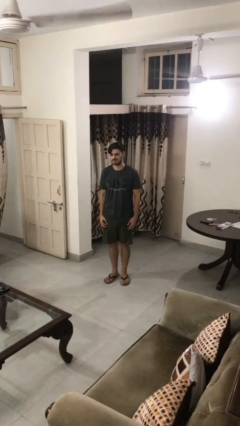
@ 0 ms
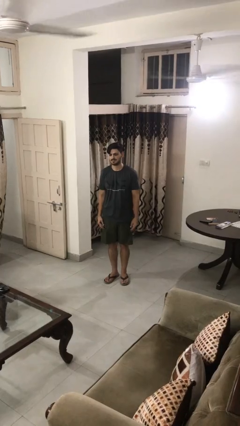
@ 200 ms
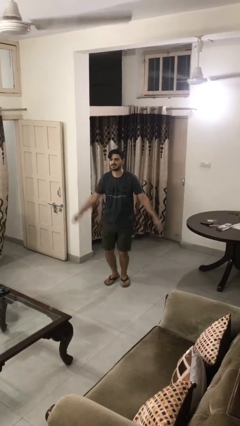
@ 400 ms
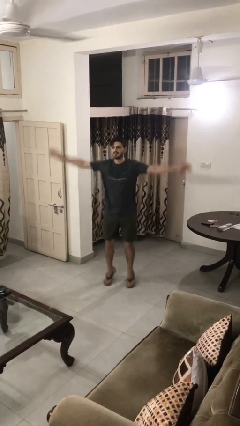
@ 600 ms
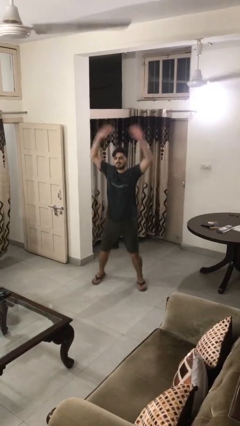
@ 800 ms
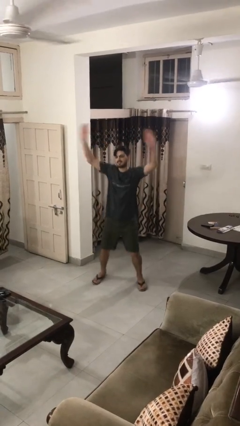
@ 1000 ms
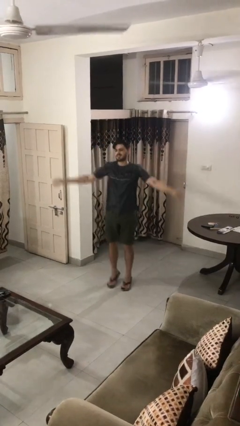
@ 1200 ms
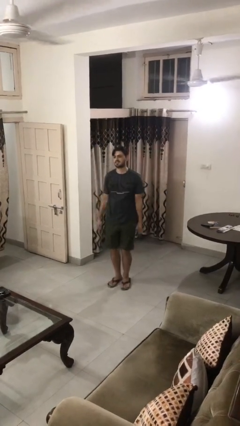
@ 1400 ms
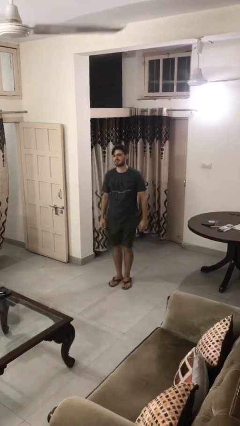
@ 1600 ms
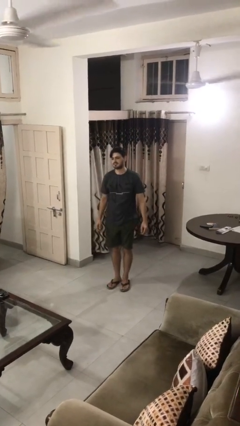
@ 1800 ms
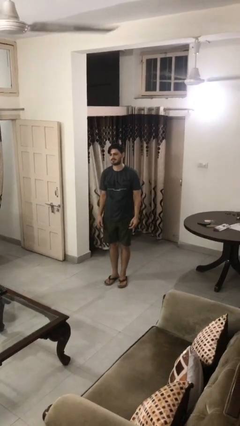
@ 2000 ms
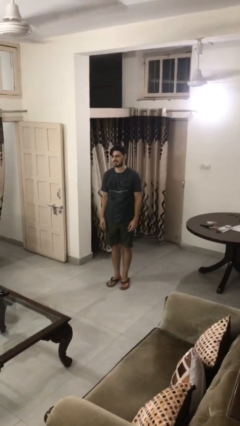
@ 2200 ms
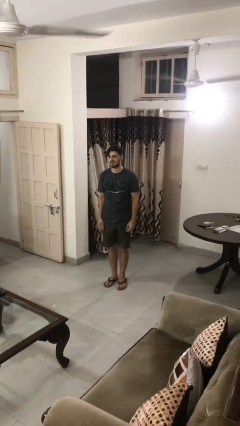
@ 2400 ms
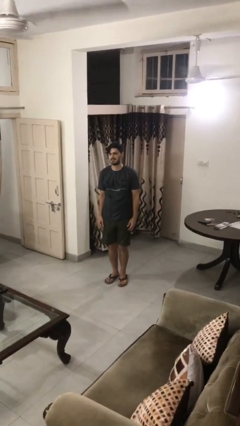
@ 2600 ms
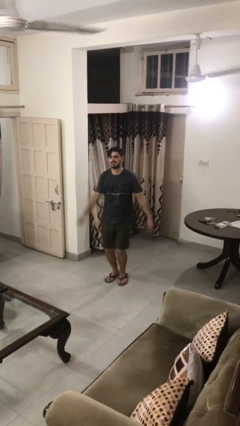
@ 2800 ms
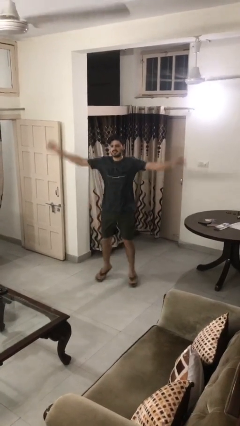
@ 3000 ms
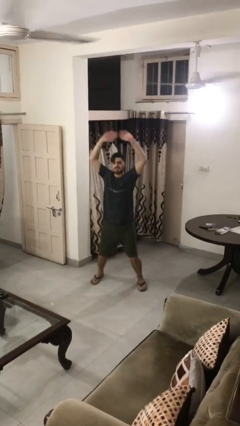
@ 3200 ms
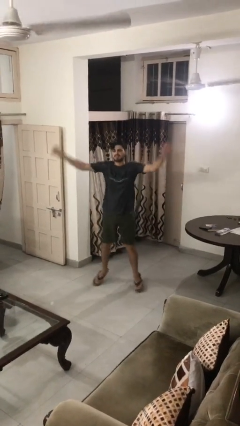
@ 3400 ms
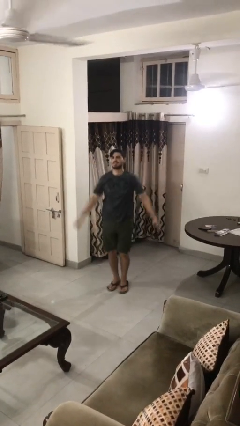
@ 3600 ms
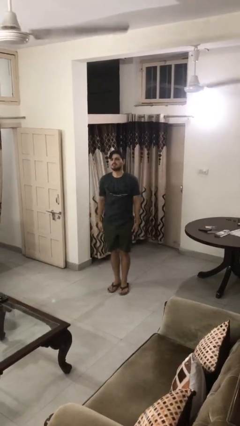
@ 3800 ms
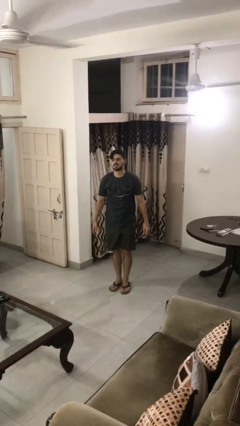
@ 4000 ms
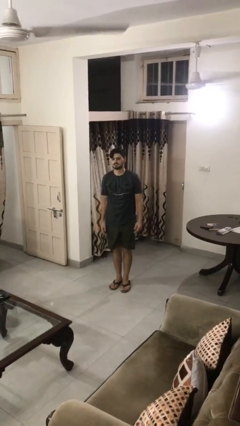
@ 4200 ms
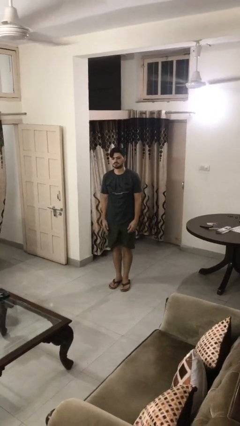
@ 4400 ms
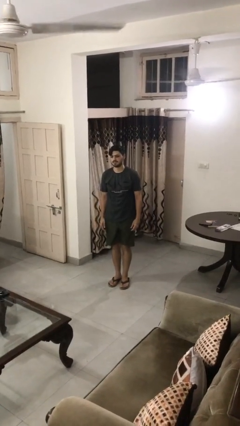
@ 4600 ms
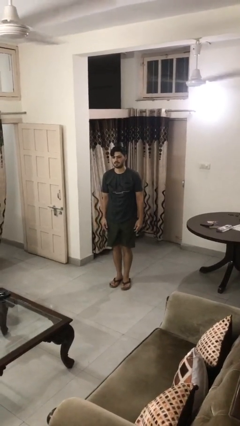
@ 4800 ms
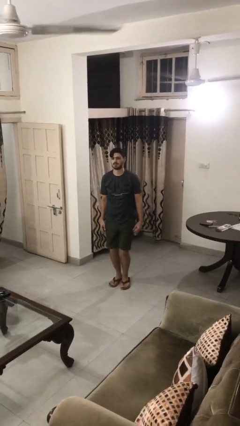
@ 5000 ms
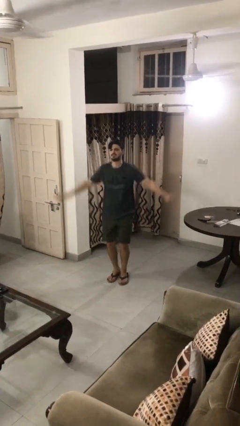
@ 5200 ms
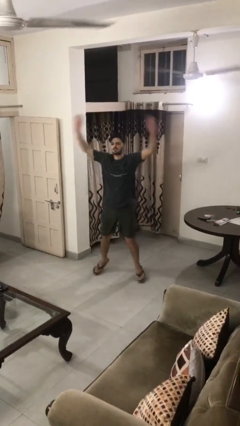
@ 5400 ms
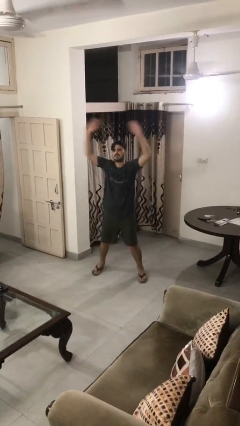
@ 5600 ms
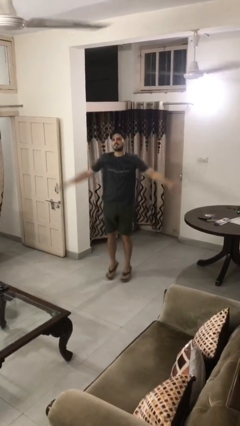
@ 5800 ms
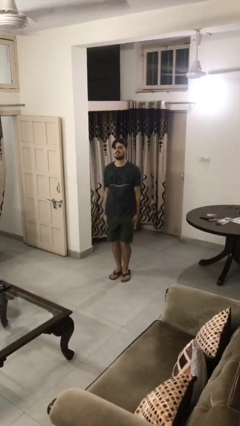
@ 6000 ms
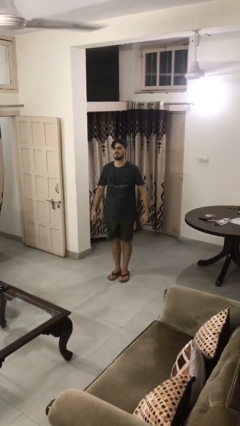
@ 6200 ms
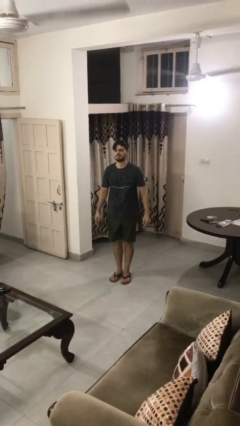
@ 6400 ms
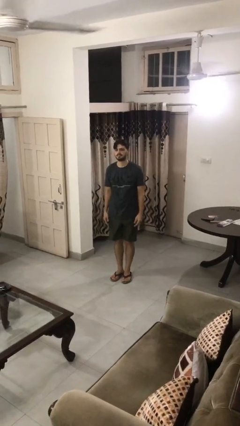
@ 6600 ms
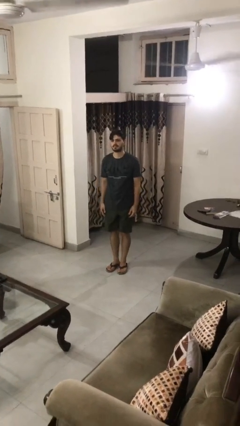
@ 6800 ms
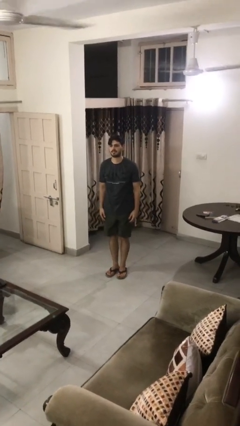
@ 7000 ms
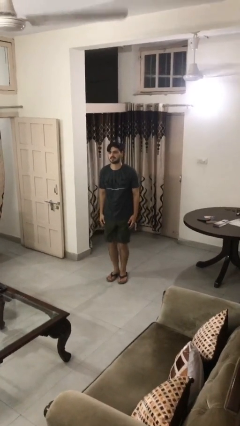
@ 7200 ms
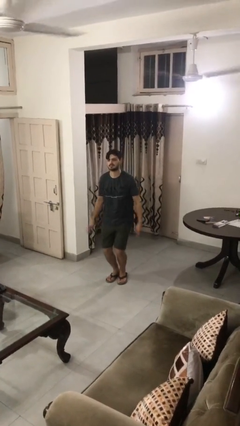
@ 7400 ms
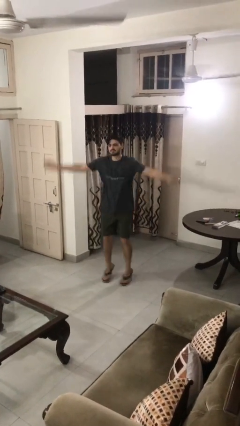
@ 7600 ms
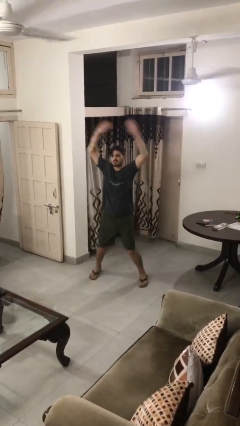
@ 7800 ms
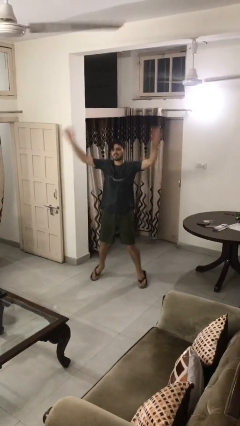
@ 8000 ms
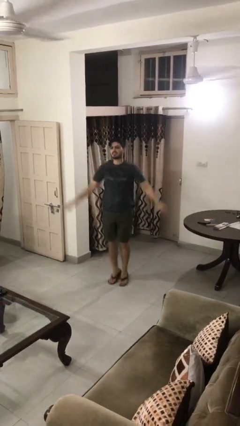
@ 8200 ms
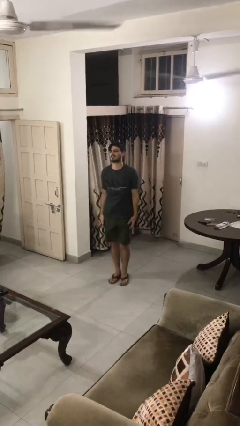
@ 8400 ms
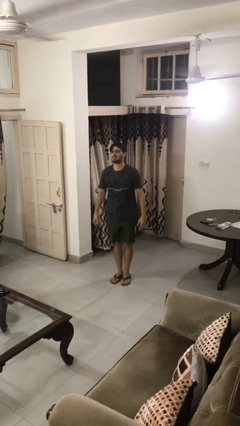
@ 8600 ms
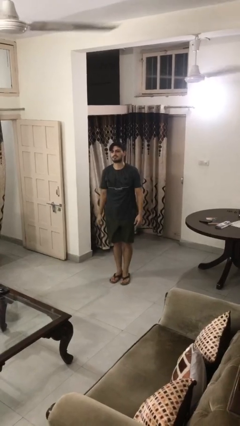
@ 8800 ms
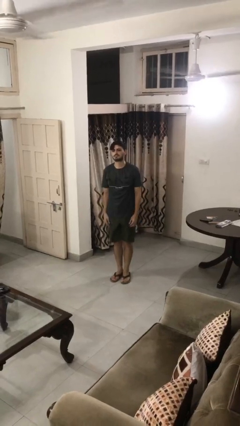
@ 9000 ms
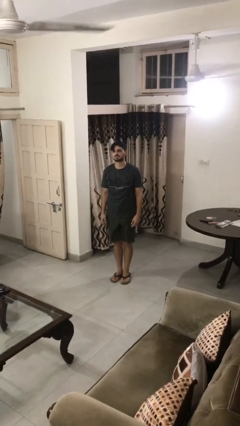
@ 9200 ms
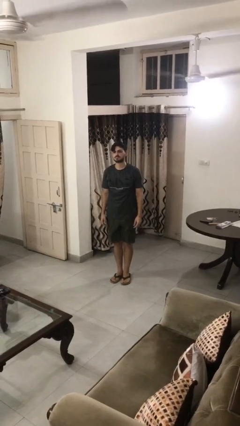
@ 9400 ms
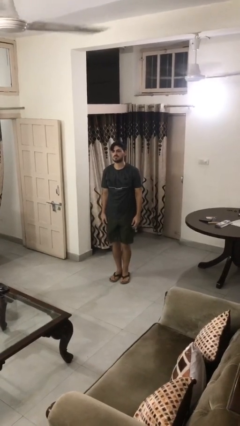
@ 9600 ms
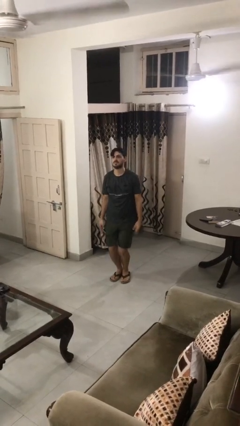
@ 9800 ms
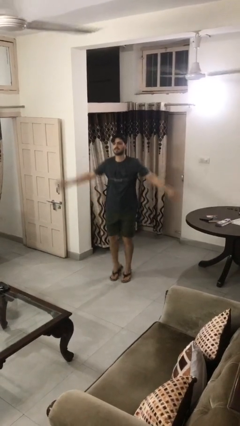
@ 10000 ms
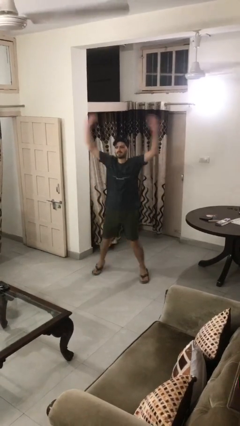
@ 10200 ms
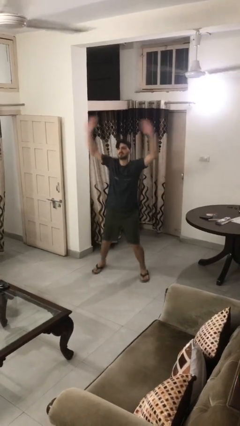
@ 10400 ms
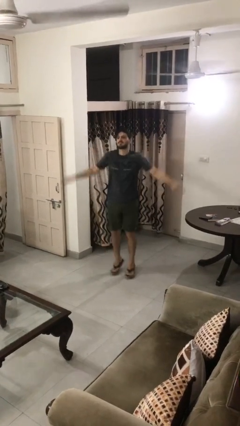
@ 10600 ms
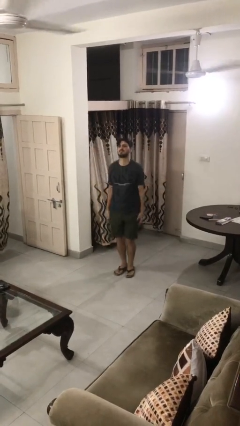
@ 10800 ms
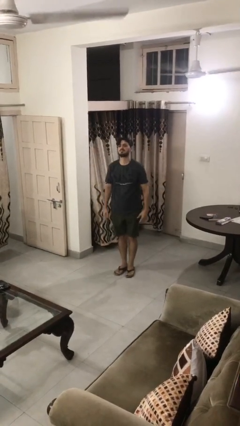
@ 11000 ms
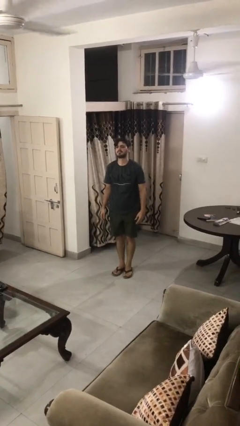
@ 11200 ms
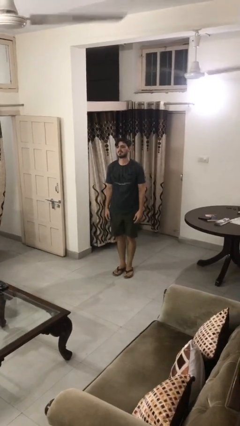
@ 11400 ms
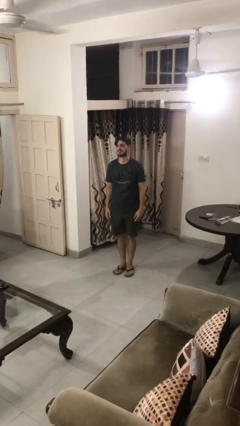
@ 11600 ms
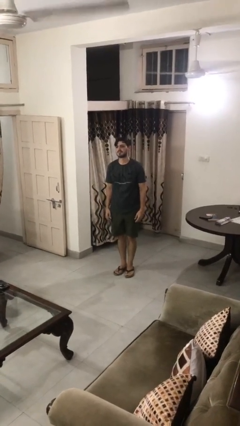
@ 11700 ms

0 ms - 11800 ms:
person exercises with jumping jacks

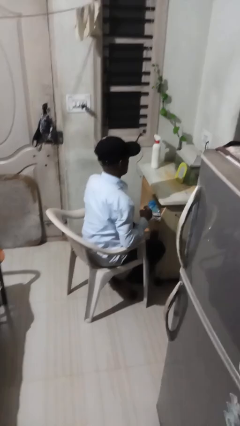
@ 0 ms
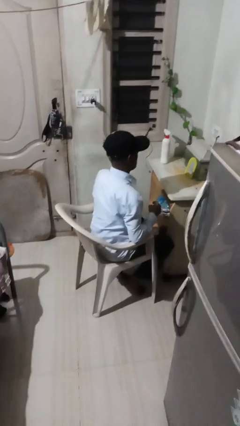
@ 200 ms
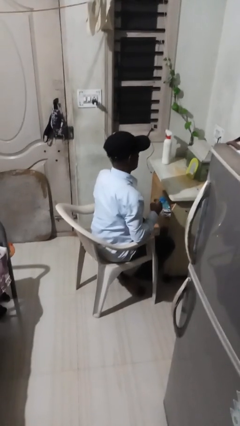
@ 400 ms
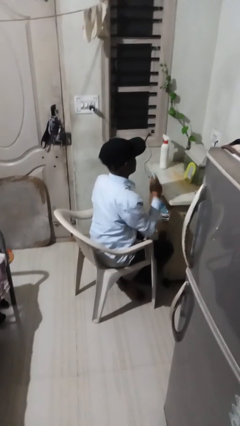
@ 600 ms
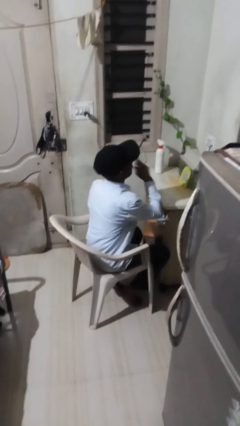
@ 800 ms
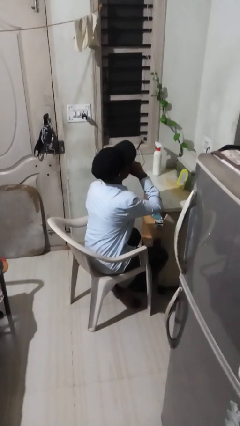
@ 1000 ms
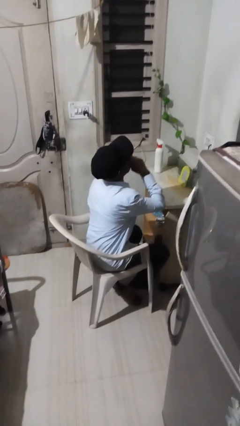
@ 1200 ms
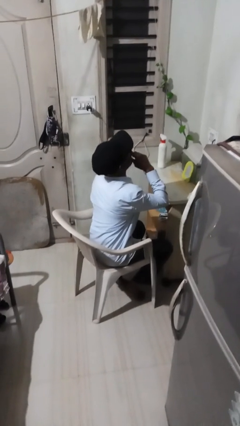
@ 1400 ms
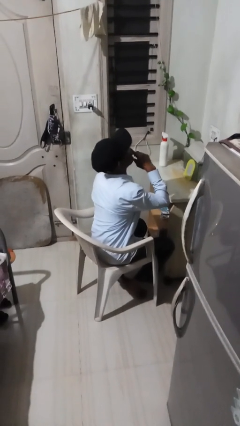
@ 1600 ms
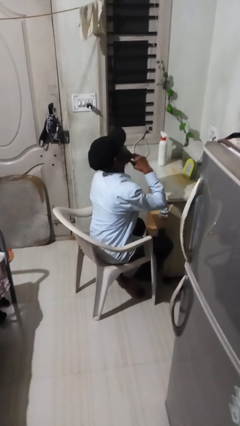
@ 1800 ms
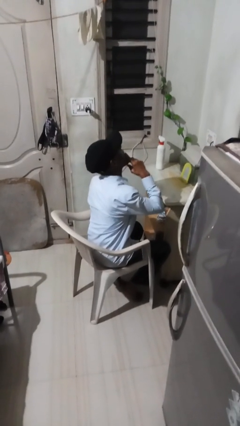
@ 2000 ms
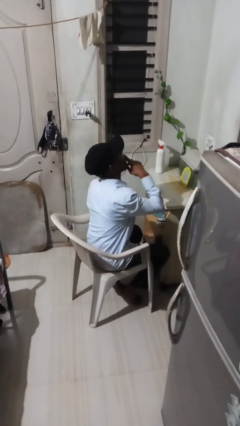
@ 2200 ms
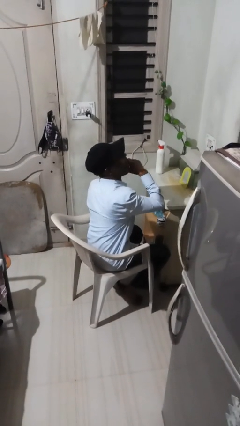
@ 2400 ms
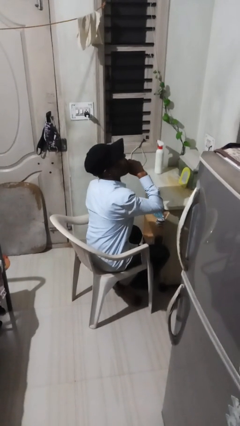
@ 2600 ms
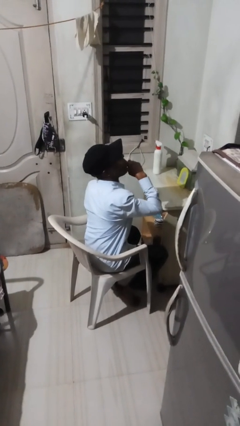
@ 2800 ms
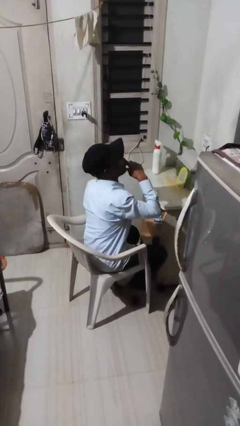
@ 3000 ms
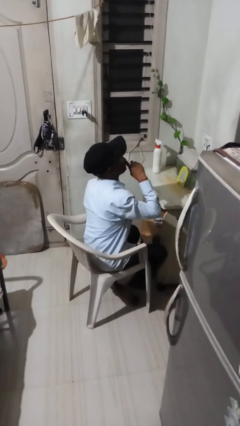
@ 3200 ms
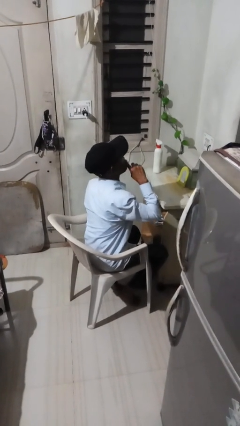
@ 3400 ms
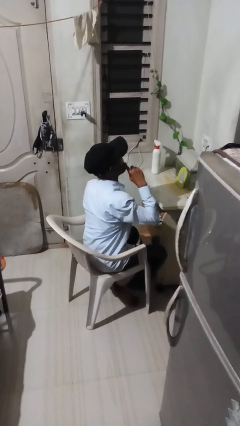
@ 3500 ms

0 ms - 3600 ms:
person licks fingers

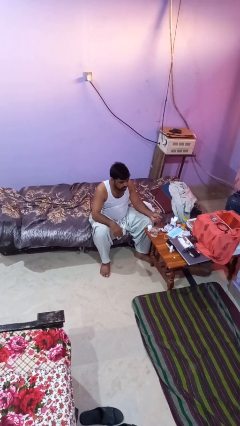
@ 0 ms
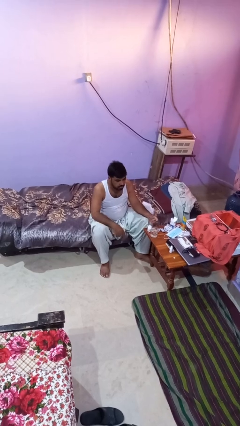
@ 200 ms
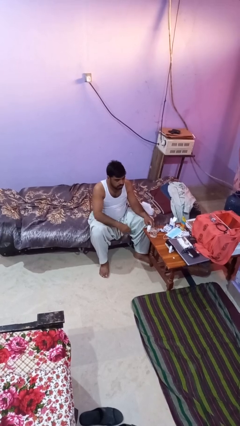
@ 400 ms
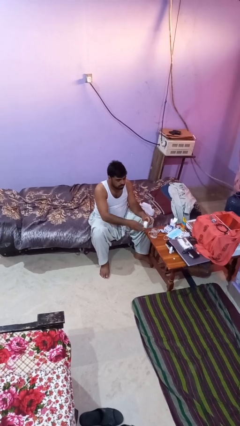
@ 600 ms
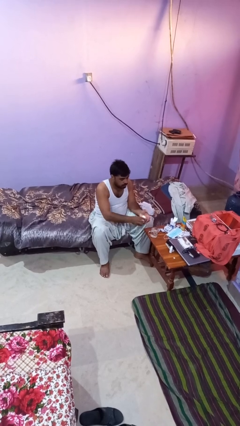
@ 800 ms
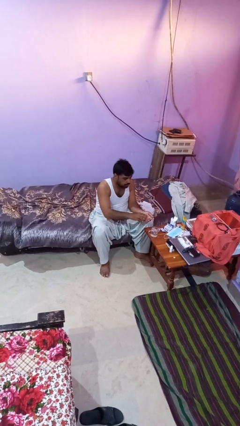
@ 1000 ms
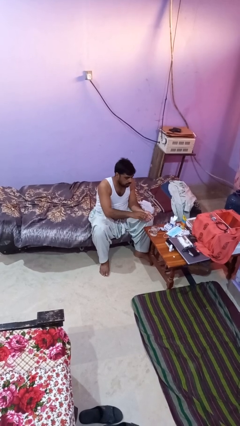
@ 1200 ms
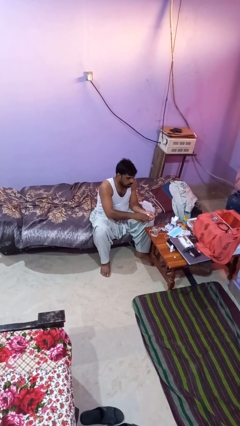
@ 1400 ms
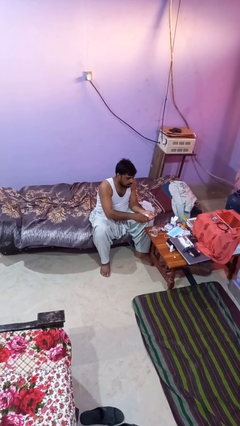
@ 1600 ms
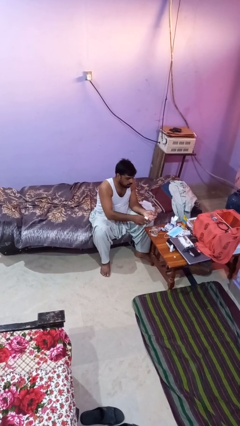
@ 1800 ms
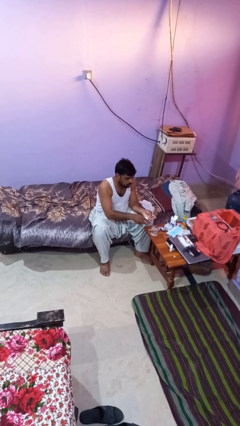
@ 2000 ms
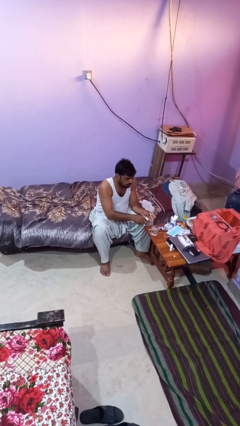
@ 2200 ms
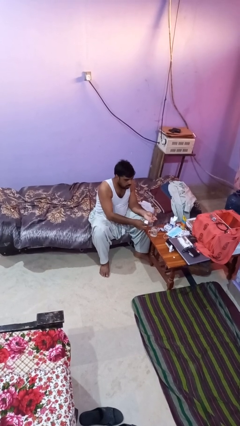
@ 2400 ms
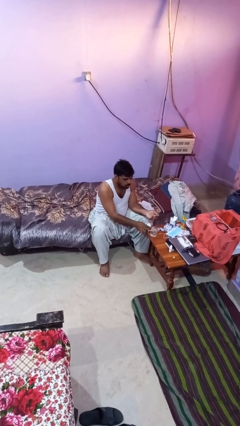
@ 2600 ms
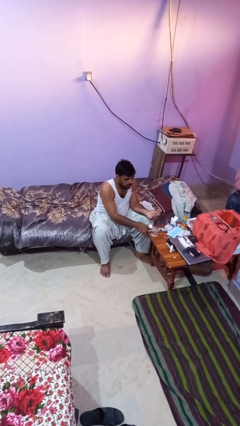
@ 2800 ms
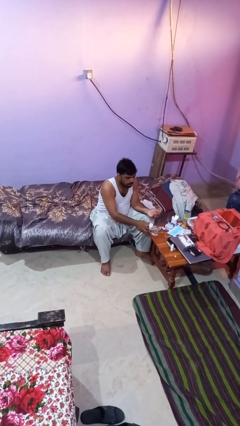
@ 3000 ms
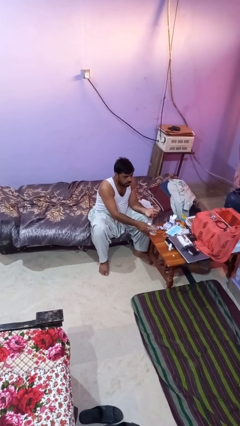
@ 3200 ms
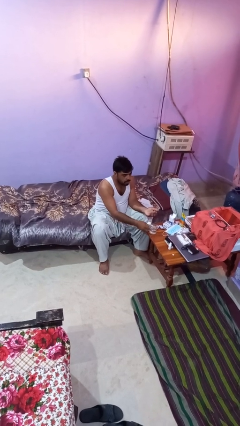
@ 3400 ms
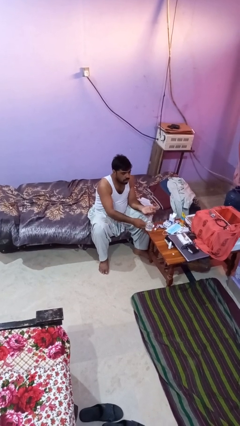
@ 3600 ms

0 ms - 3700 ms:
person takes medicine pills
